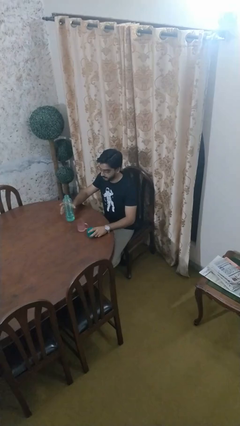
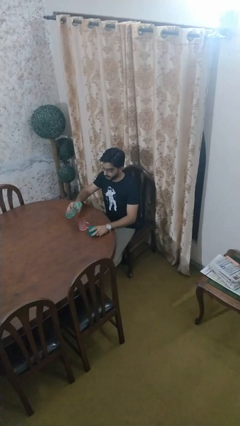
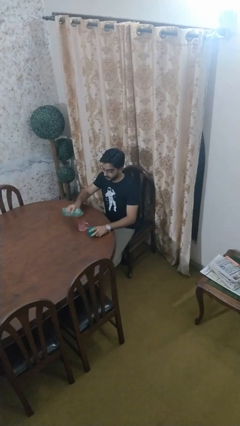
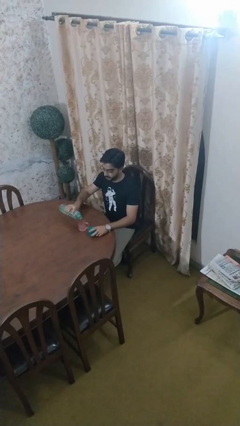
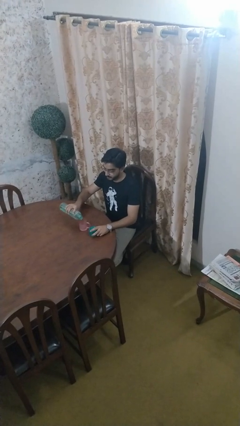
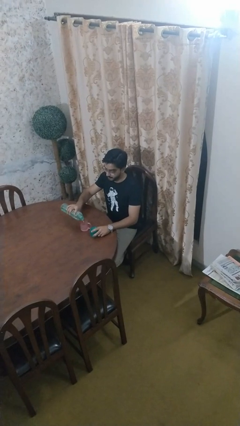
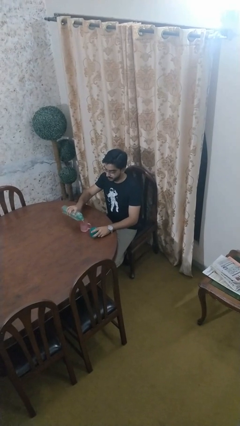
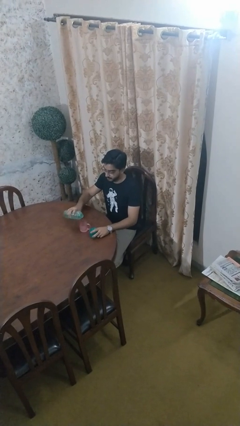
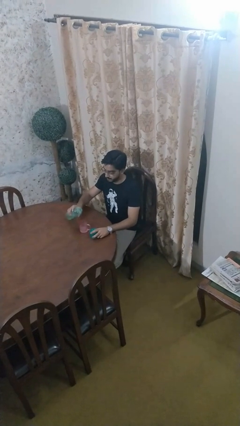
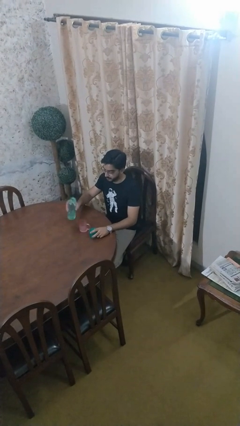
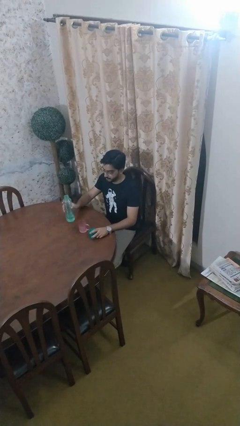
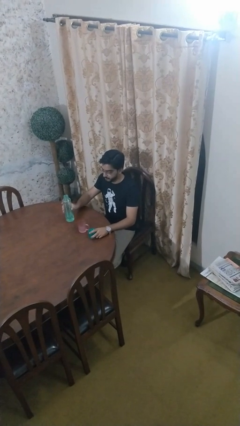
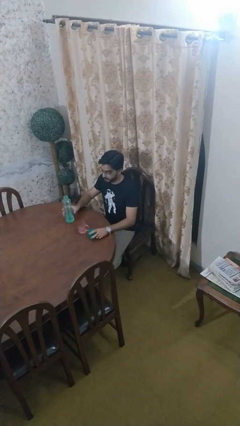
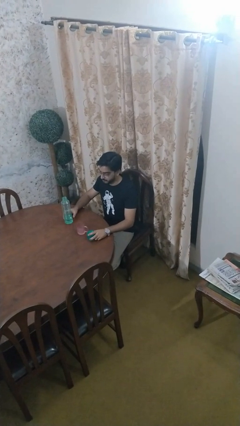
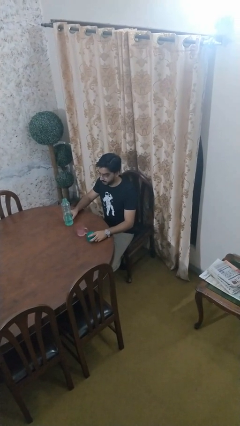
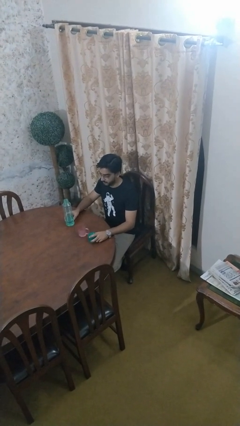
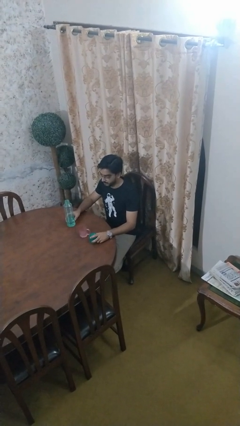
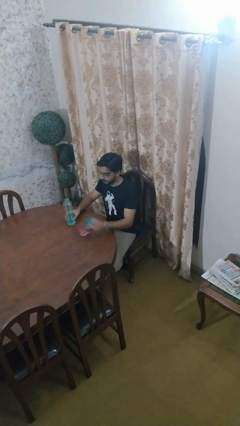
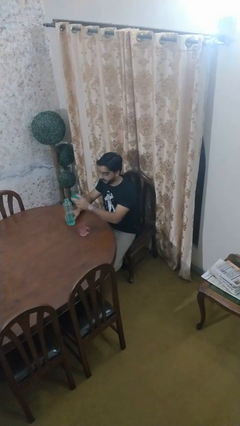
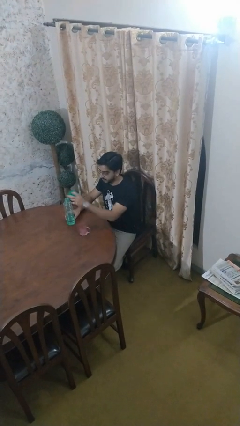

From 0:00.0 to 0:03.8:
person pours liquid into cup

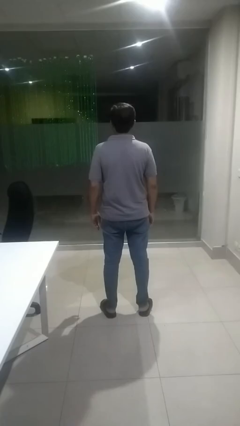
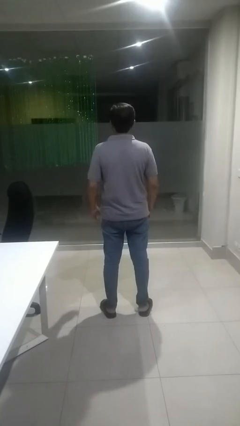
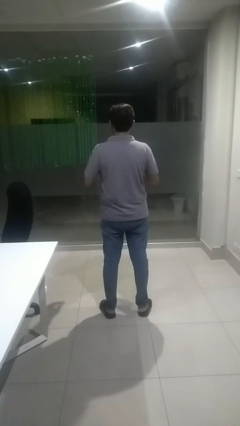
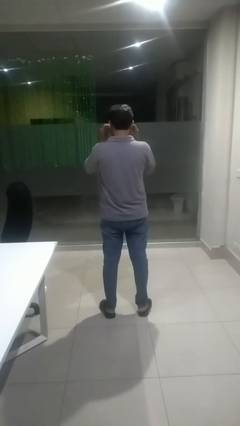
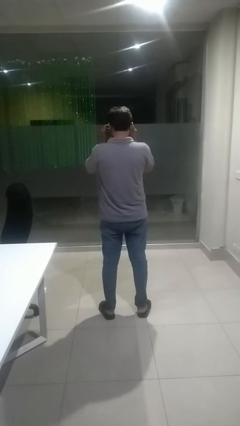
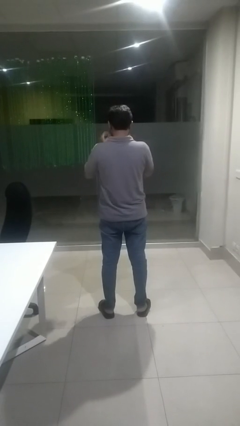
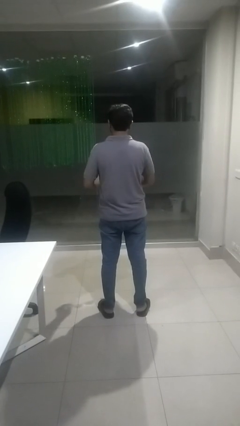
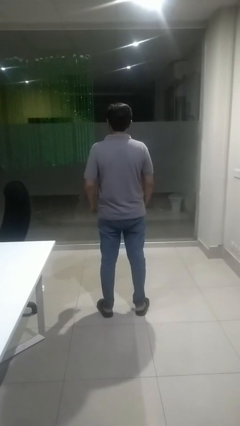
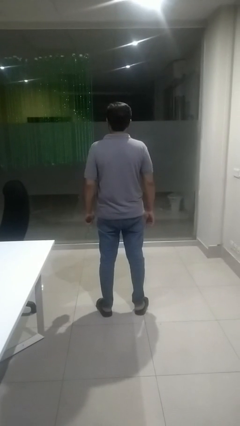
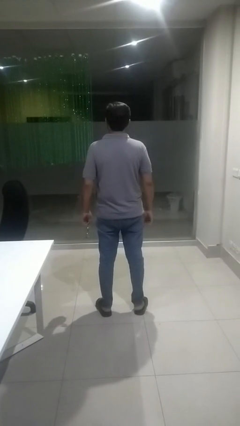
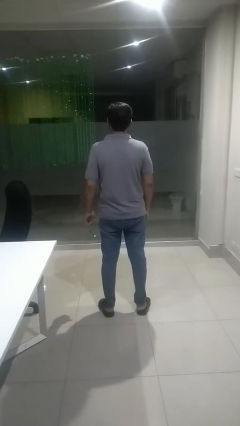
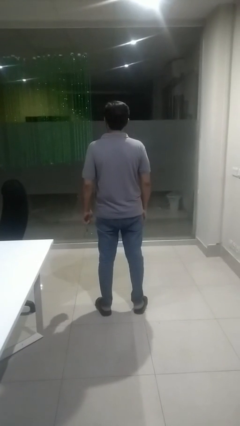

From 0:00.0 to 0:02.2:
person takes off glasses

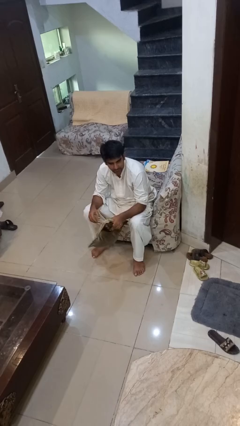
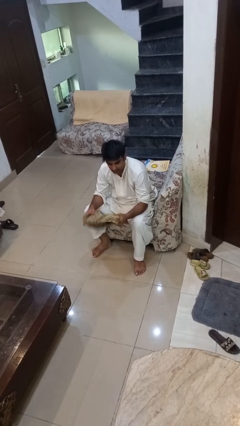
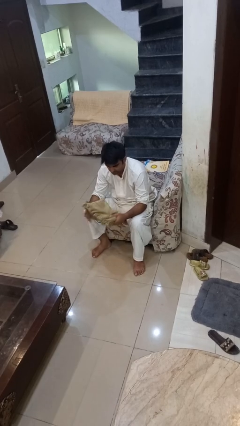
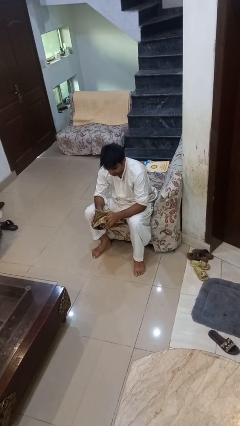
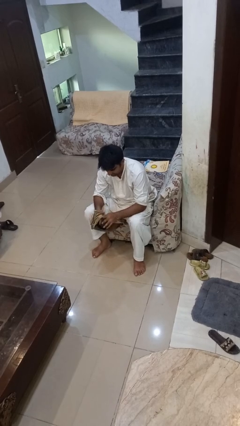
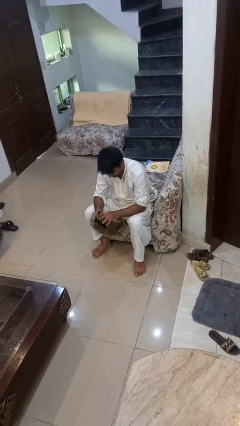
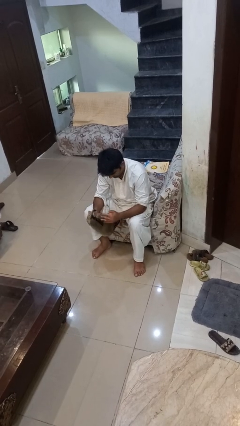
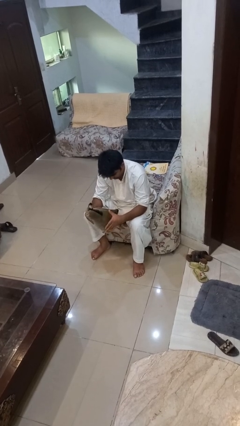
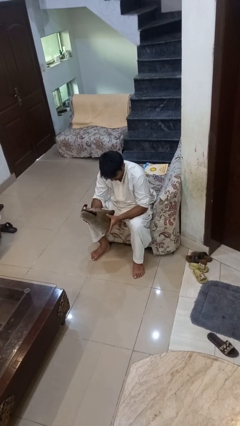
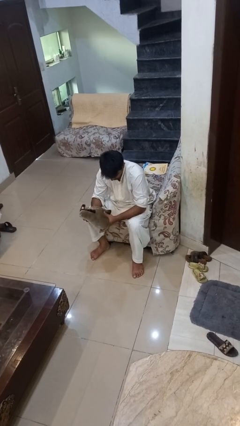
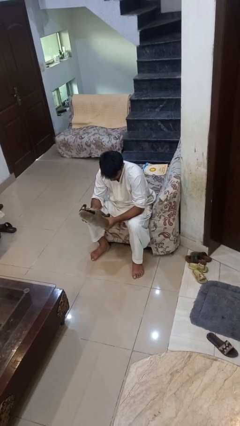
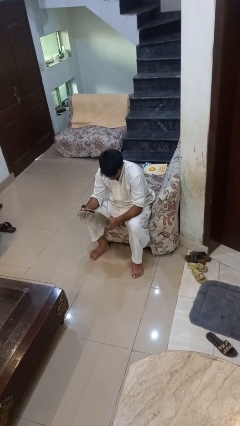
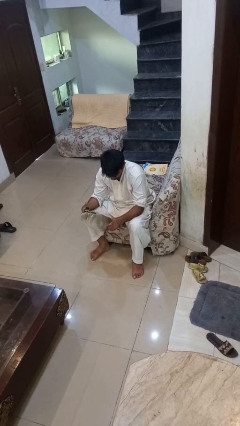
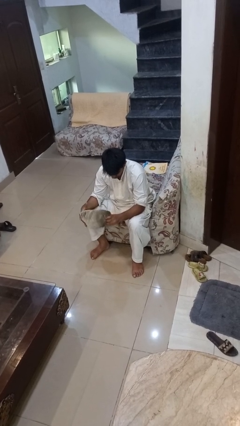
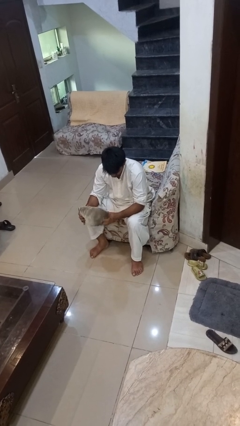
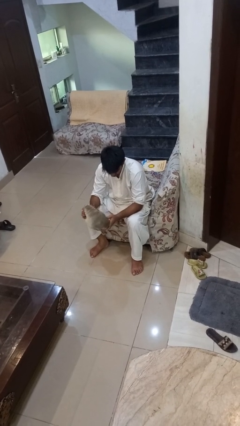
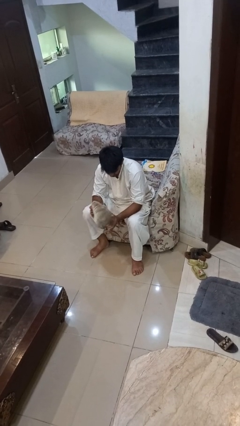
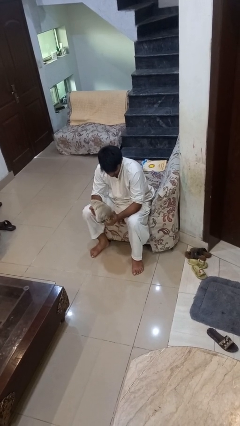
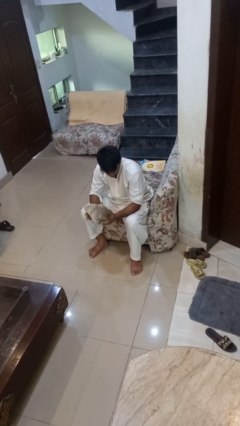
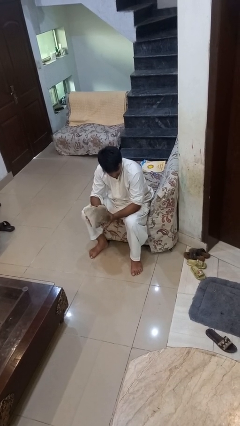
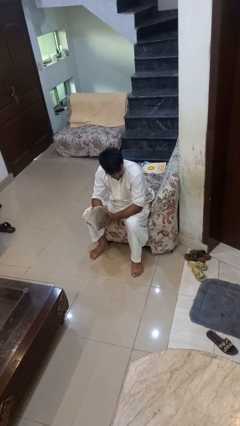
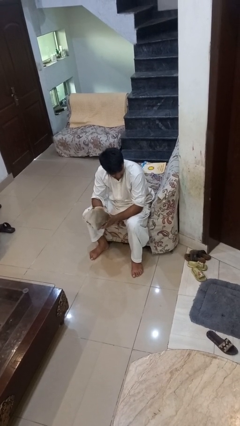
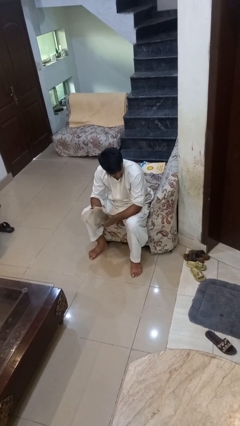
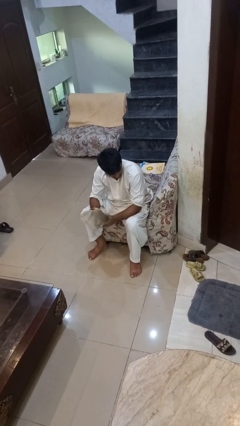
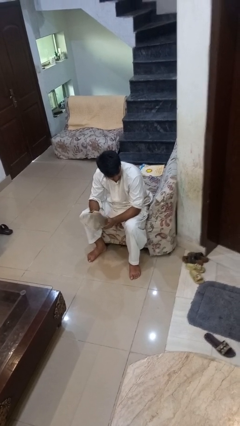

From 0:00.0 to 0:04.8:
person squeezes object

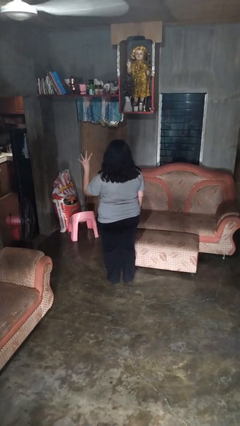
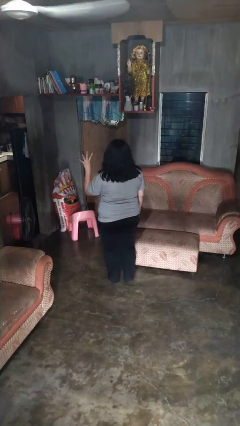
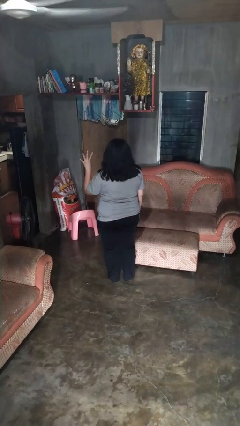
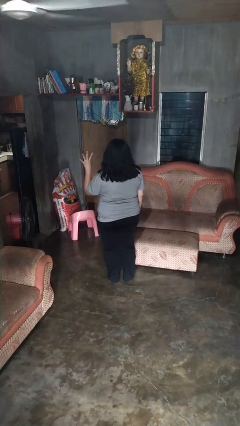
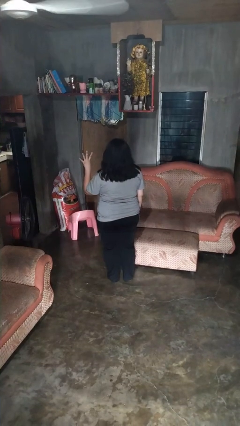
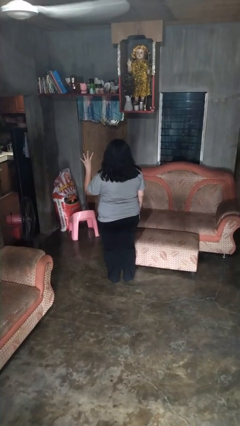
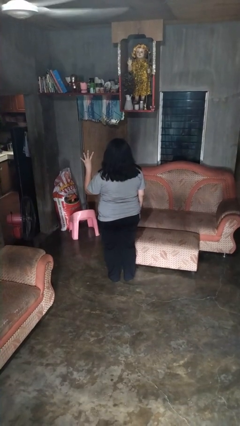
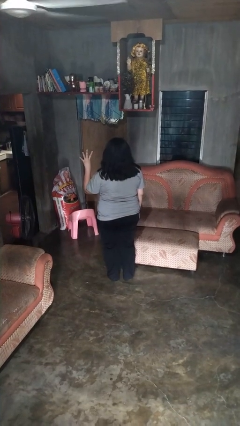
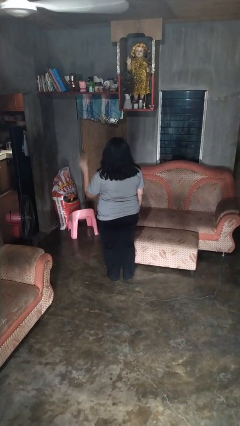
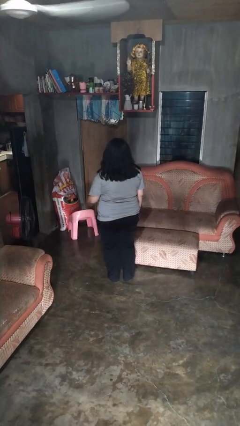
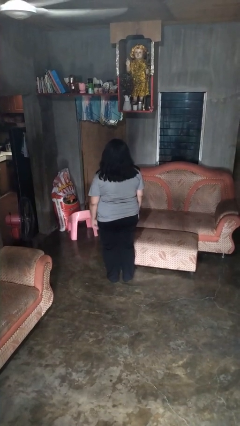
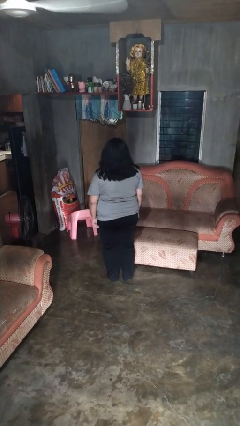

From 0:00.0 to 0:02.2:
person gestures number four

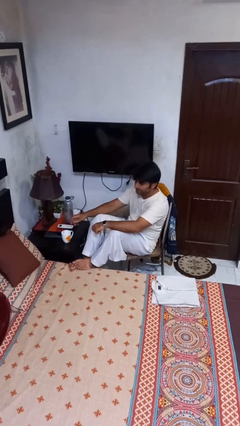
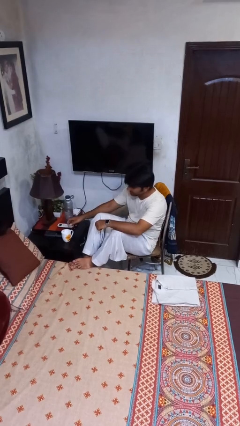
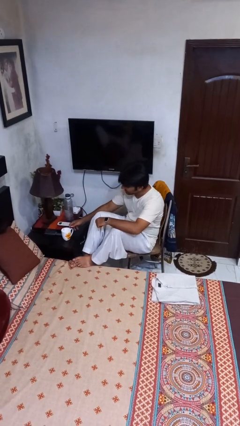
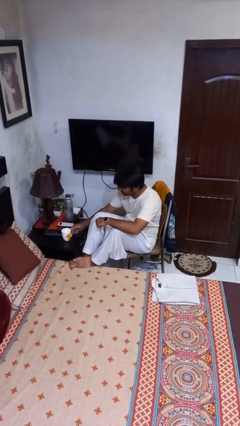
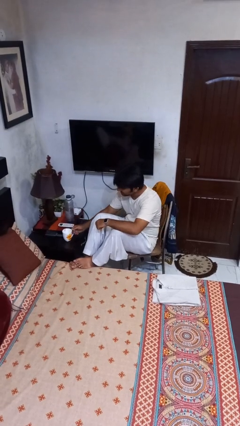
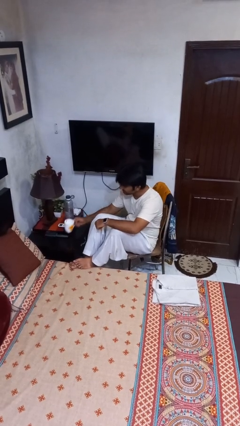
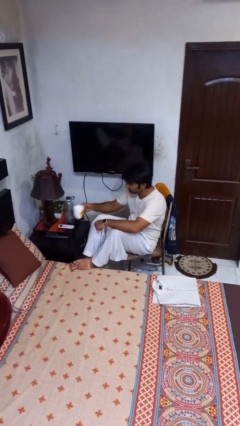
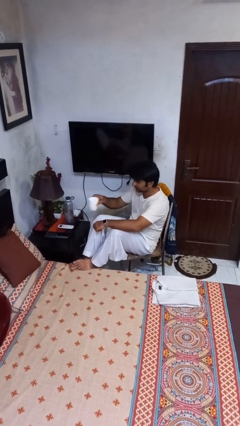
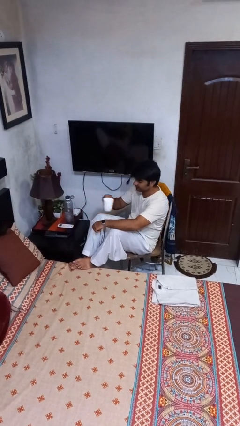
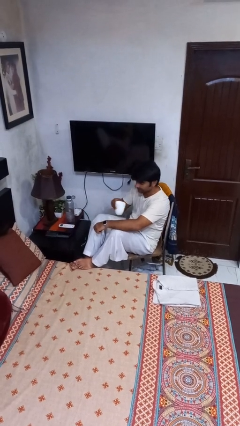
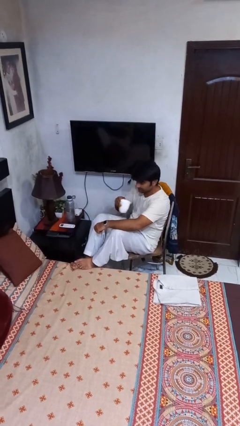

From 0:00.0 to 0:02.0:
person picks up object from table

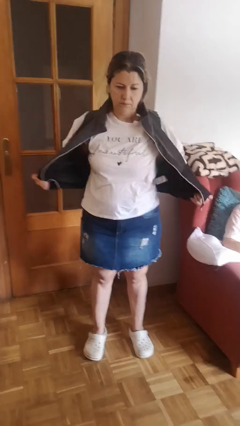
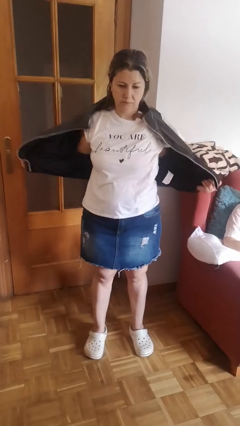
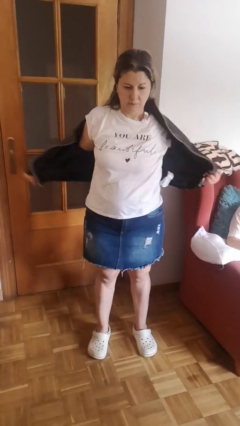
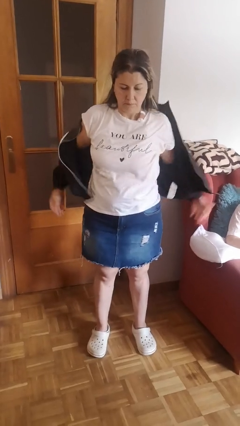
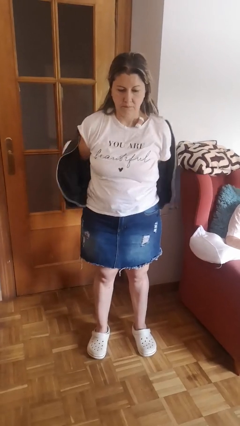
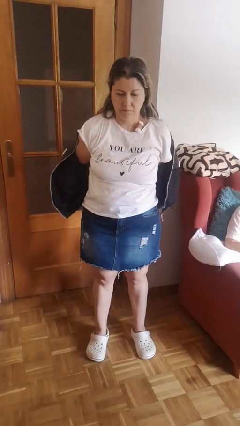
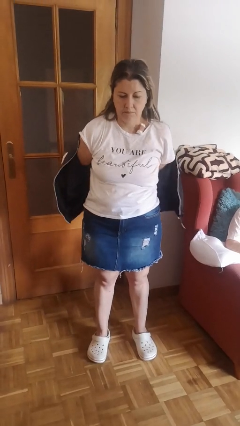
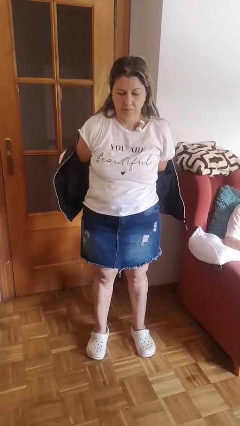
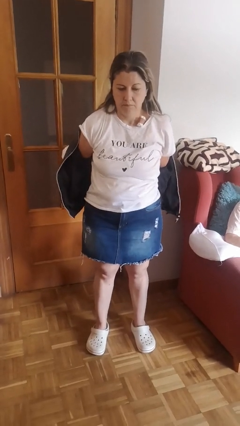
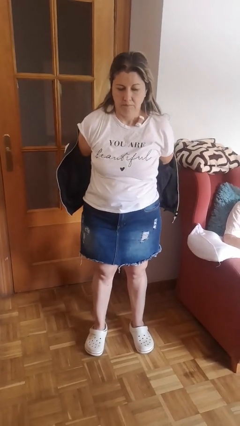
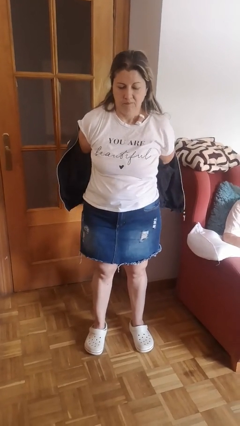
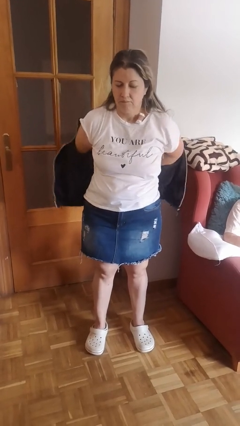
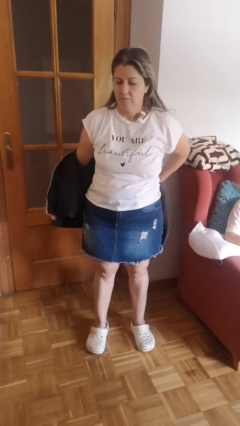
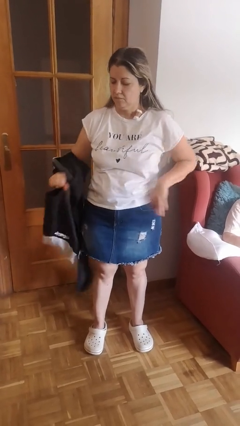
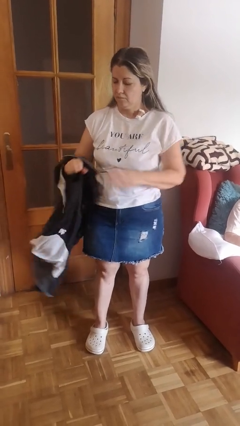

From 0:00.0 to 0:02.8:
person takes off jacket
